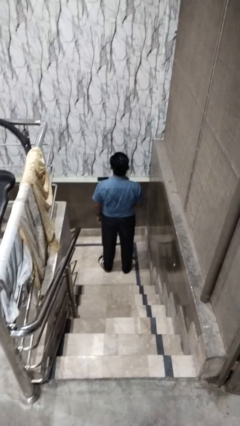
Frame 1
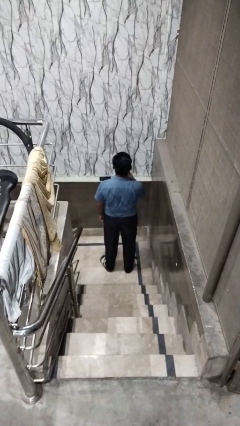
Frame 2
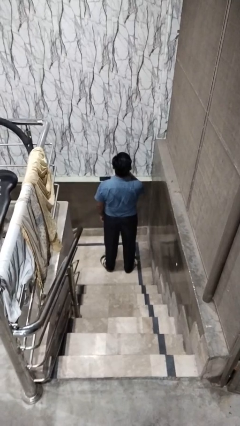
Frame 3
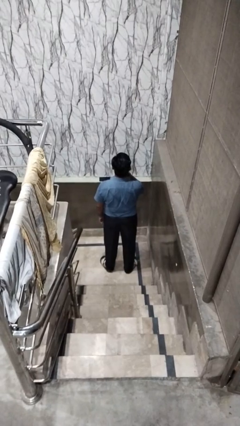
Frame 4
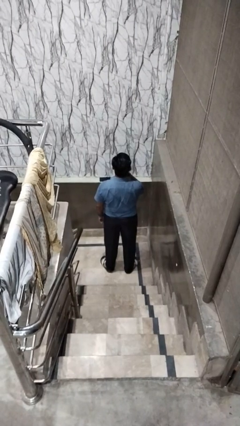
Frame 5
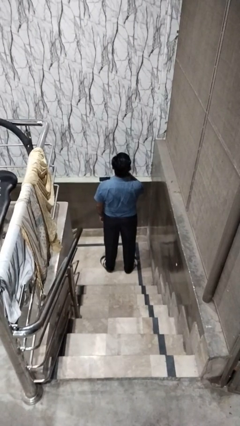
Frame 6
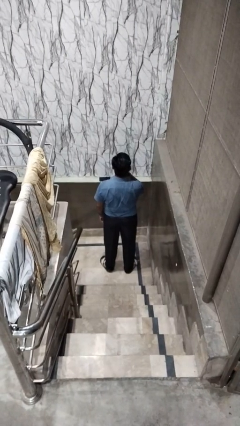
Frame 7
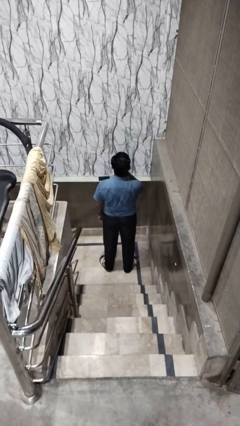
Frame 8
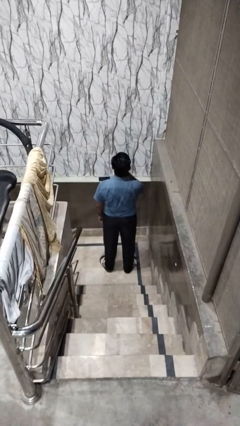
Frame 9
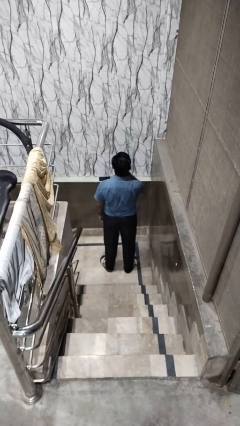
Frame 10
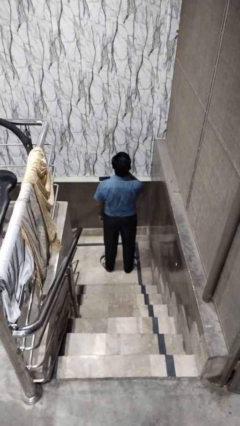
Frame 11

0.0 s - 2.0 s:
person gestures be quiet

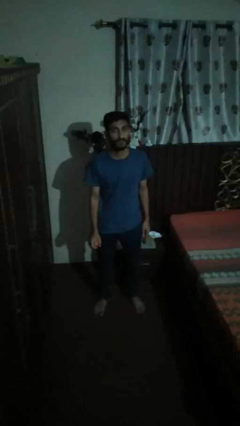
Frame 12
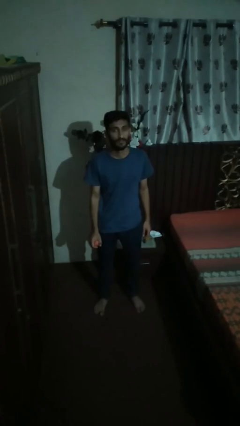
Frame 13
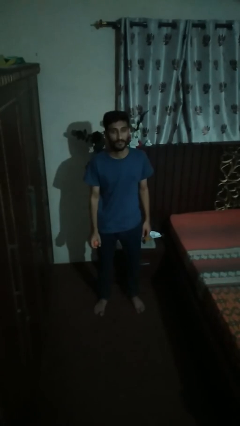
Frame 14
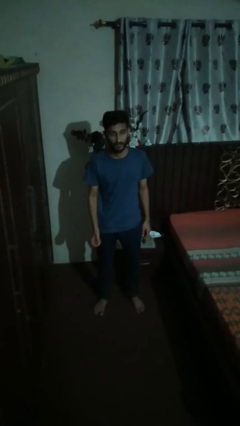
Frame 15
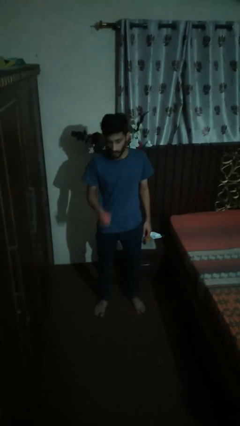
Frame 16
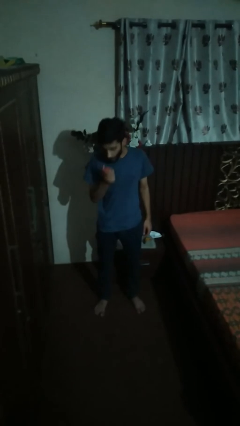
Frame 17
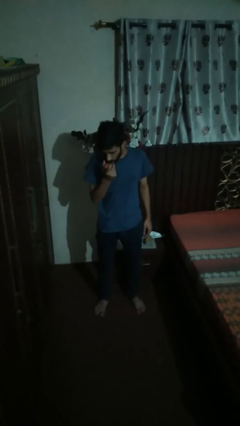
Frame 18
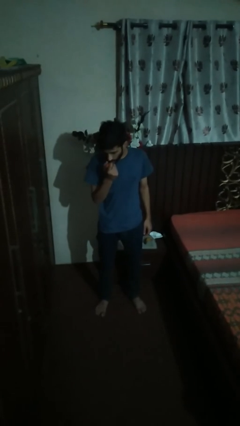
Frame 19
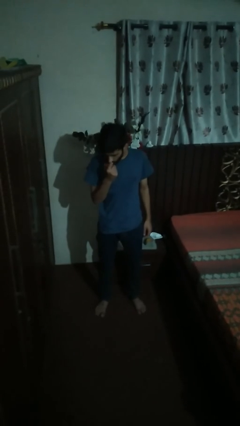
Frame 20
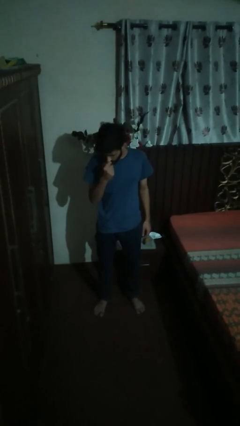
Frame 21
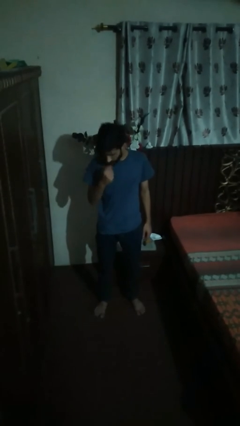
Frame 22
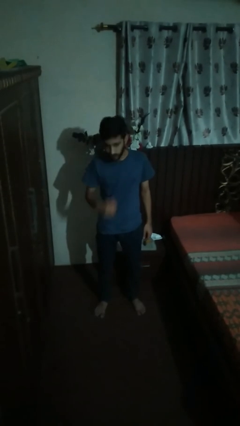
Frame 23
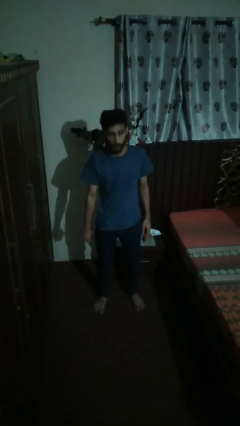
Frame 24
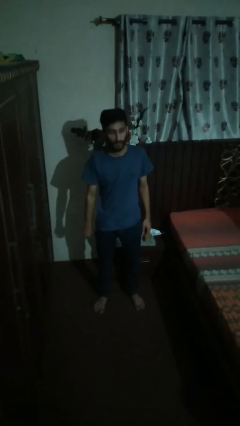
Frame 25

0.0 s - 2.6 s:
person eats apple

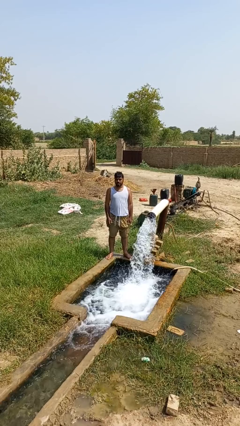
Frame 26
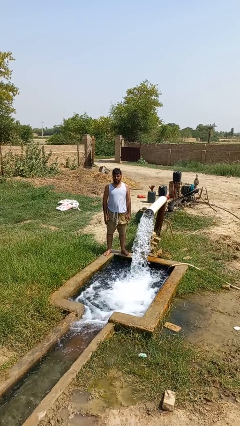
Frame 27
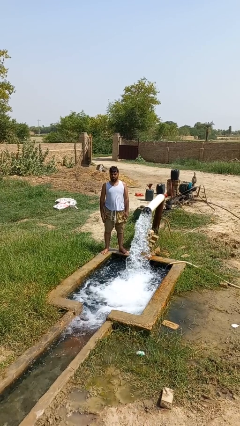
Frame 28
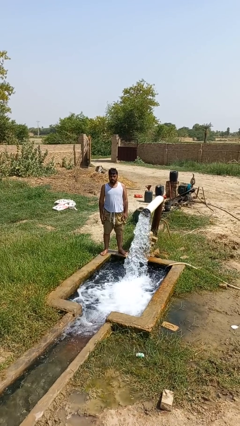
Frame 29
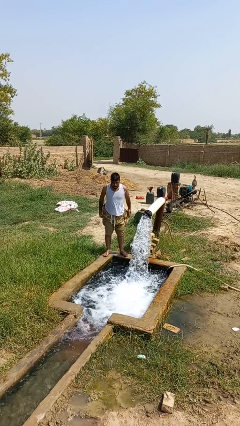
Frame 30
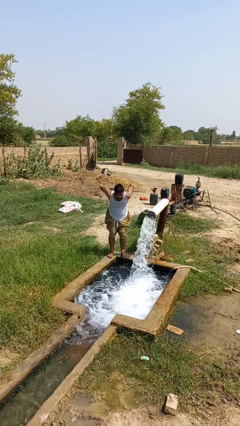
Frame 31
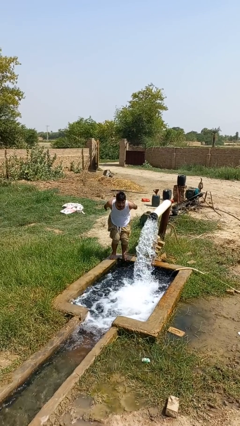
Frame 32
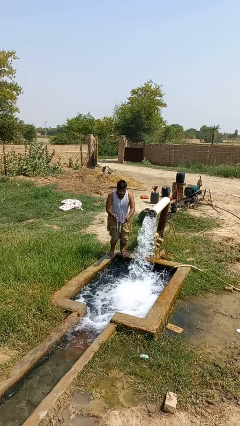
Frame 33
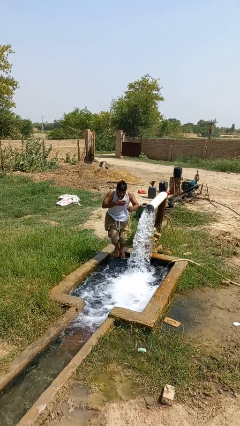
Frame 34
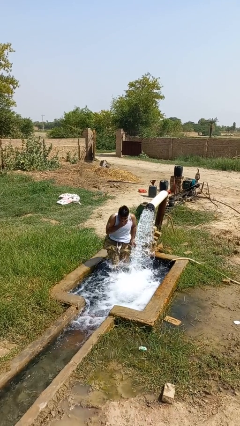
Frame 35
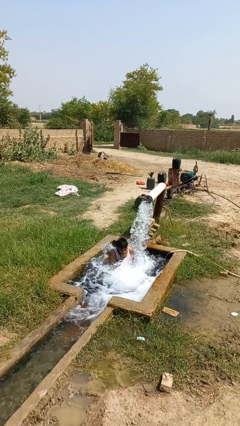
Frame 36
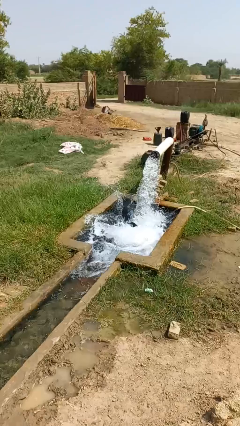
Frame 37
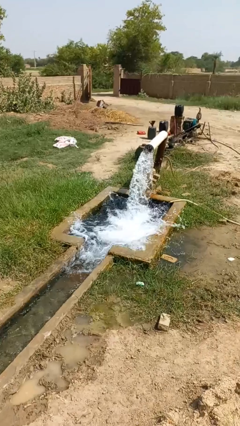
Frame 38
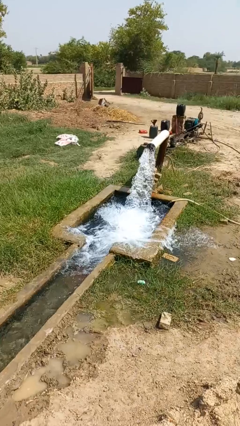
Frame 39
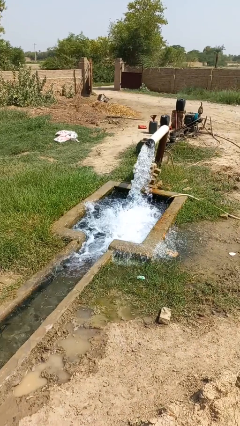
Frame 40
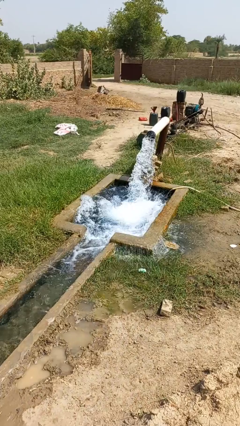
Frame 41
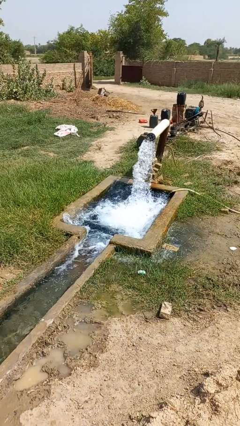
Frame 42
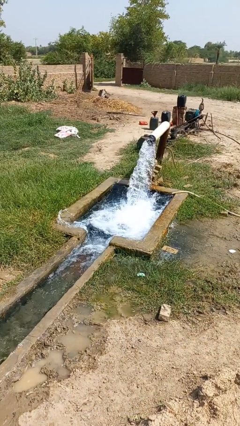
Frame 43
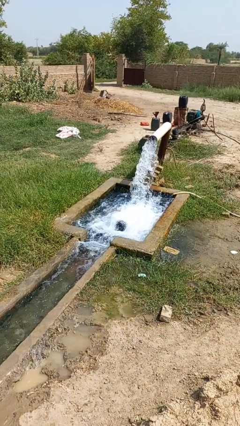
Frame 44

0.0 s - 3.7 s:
person jumps into pool

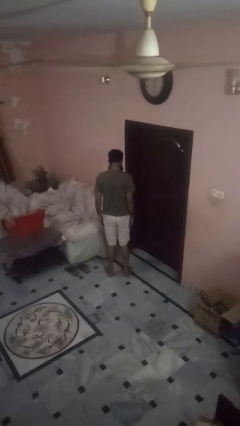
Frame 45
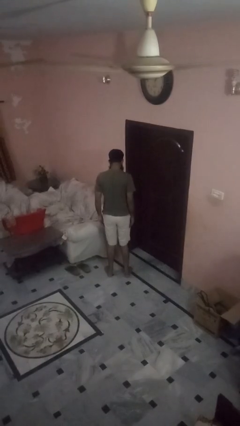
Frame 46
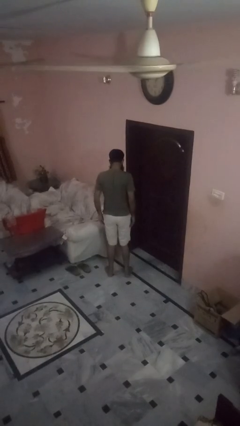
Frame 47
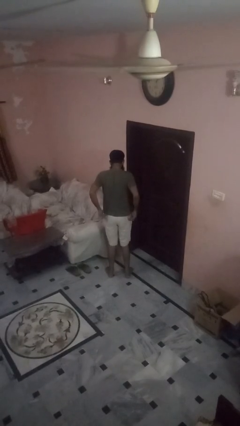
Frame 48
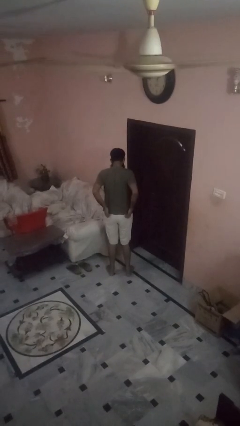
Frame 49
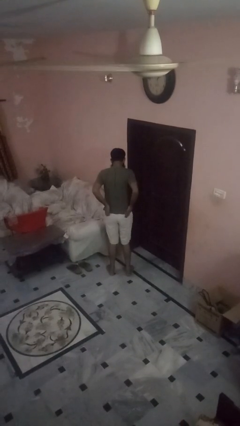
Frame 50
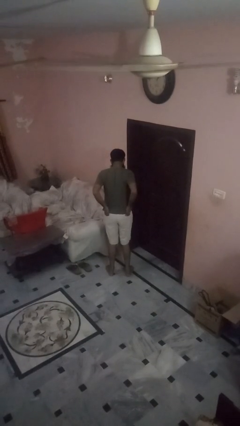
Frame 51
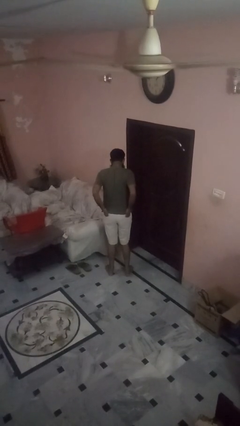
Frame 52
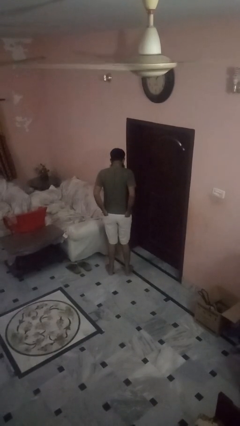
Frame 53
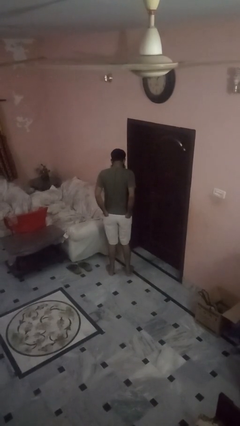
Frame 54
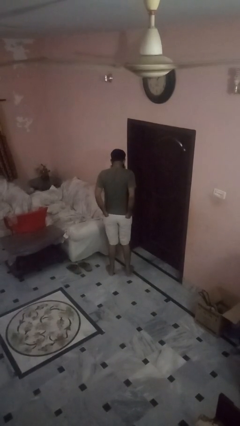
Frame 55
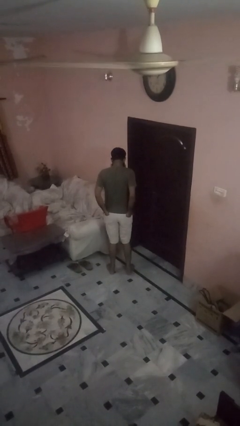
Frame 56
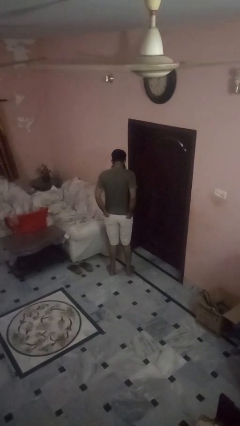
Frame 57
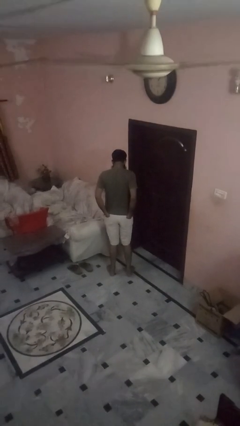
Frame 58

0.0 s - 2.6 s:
person puts hands in back pockets

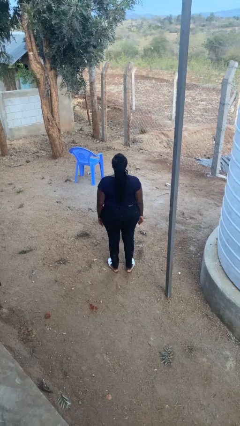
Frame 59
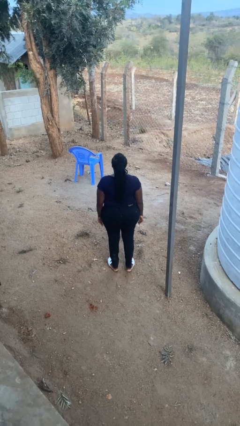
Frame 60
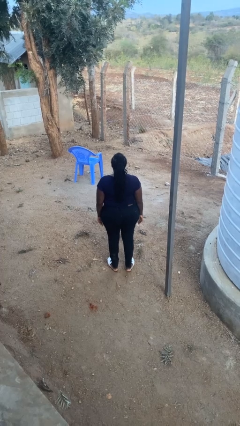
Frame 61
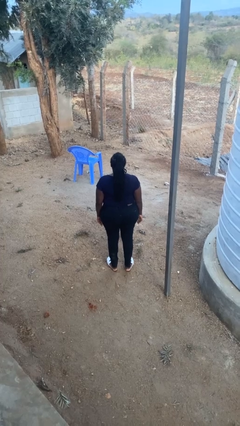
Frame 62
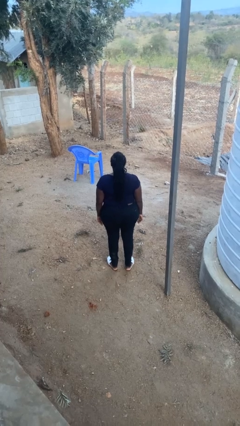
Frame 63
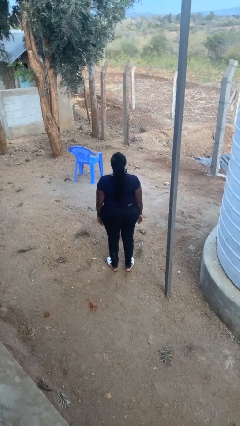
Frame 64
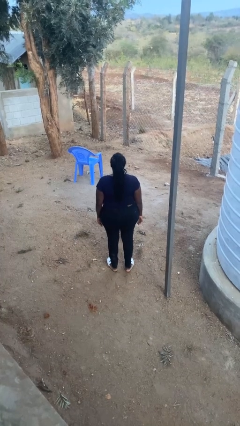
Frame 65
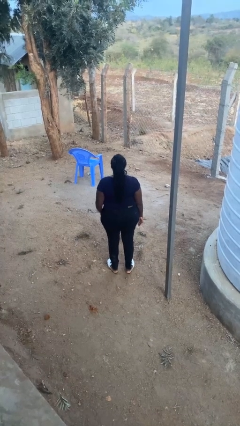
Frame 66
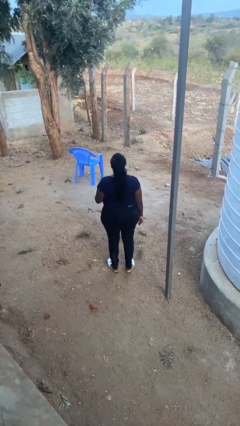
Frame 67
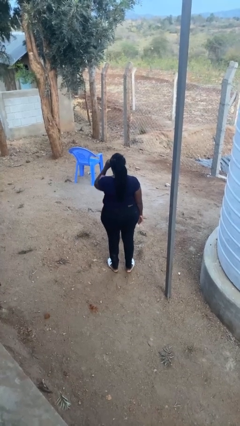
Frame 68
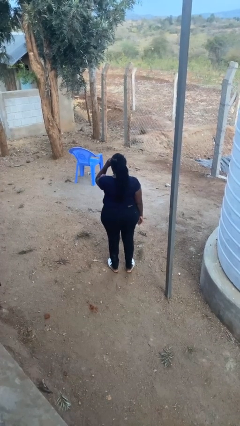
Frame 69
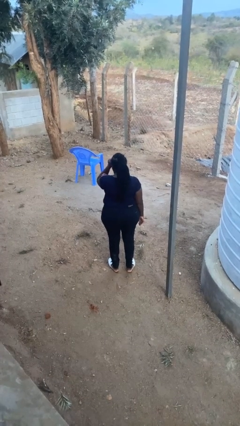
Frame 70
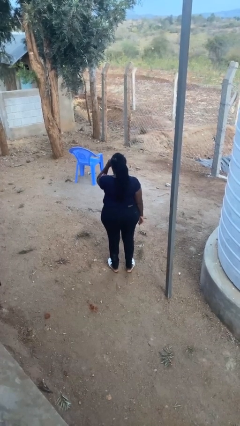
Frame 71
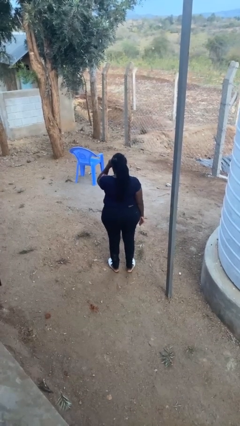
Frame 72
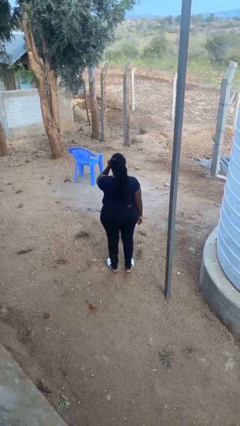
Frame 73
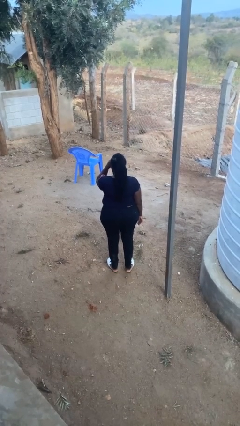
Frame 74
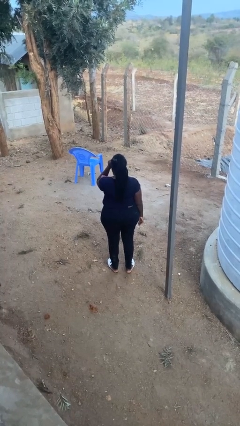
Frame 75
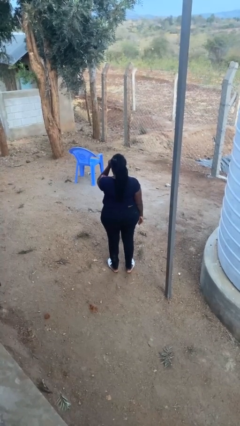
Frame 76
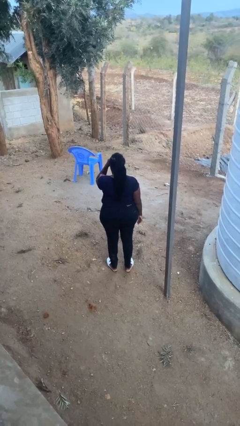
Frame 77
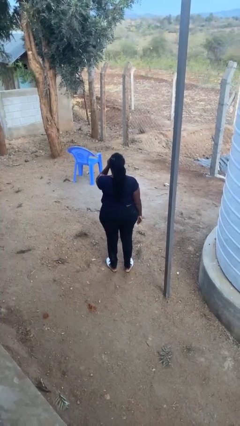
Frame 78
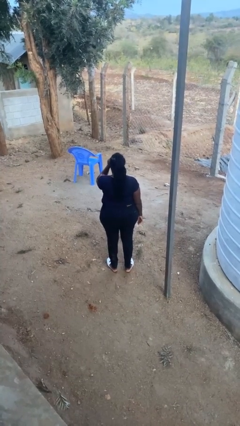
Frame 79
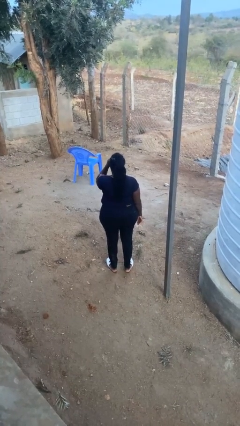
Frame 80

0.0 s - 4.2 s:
person rubs eyes

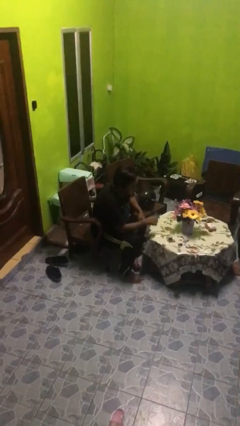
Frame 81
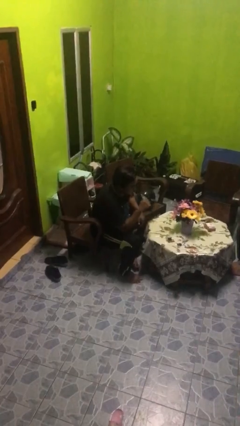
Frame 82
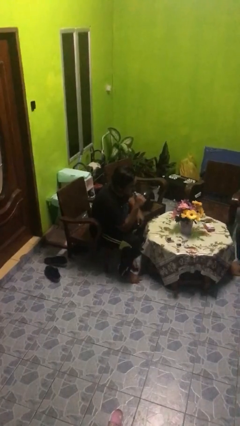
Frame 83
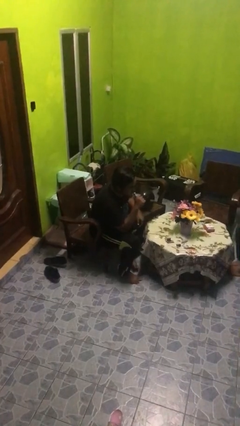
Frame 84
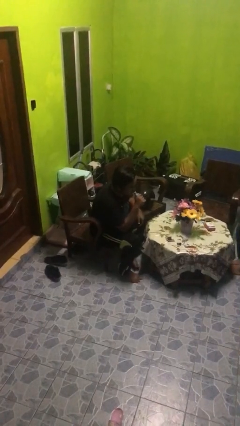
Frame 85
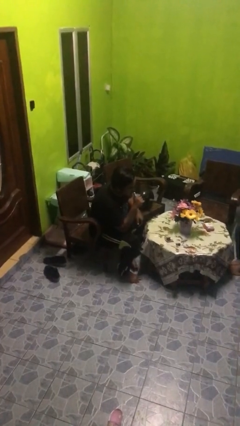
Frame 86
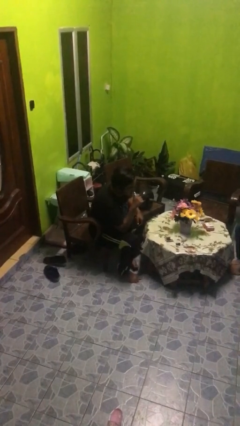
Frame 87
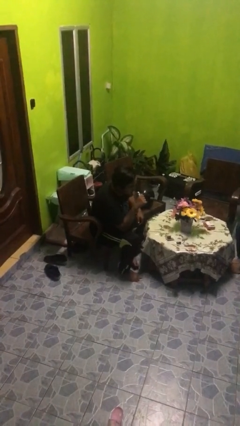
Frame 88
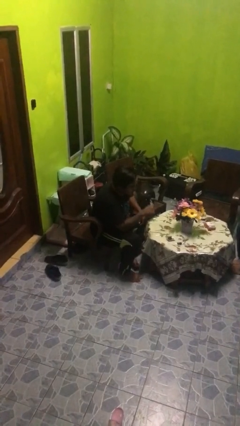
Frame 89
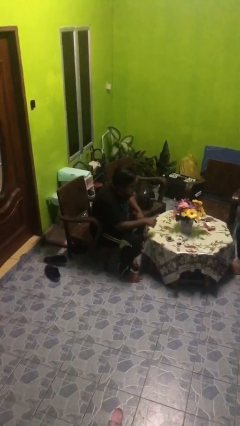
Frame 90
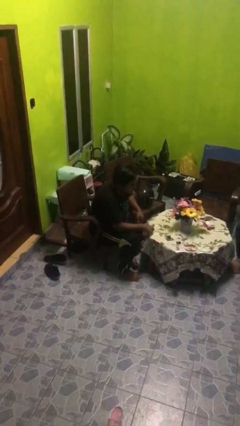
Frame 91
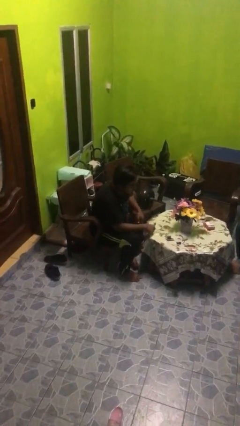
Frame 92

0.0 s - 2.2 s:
person vapes

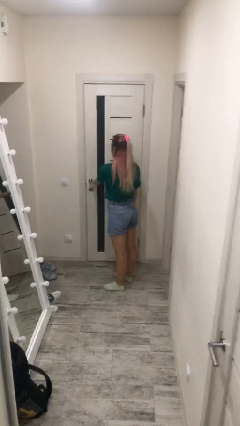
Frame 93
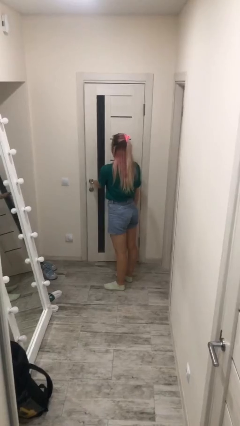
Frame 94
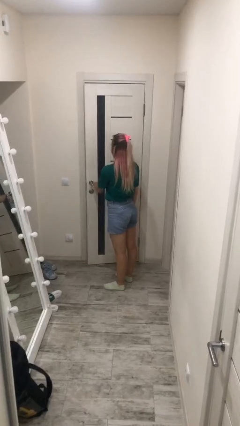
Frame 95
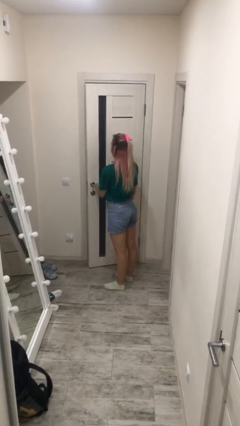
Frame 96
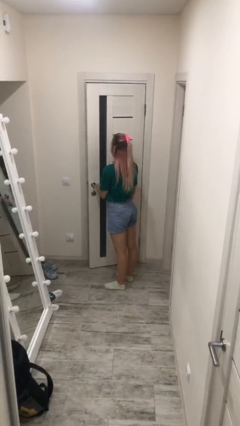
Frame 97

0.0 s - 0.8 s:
person opens facility door
